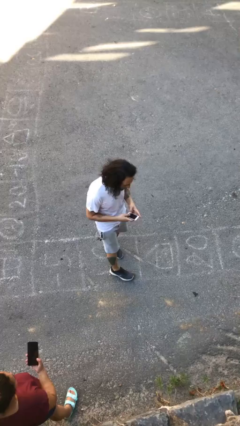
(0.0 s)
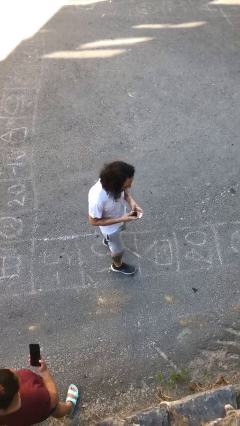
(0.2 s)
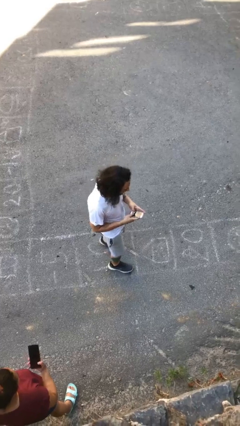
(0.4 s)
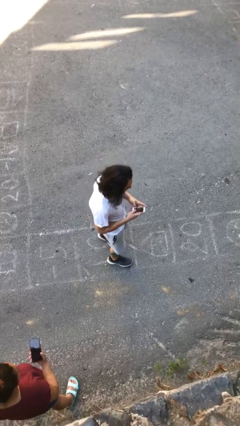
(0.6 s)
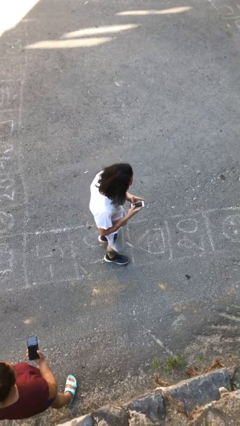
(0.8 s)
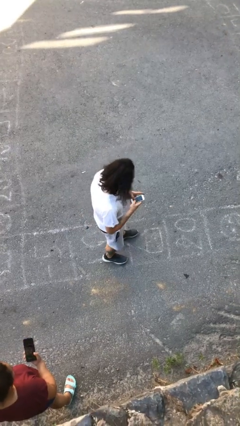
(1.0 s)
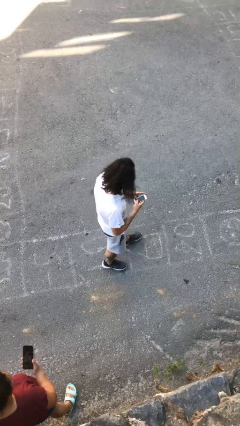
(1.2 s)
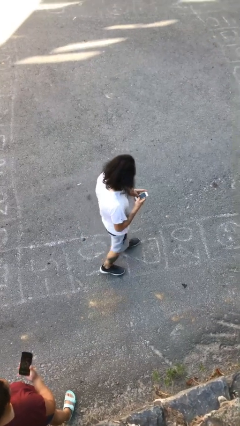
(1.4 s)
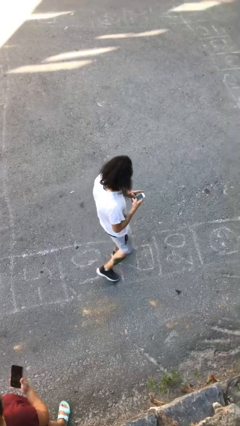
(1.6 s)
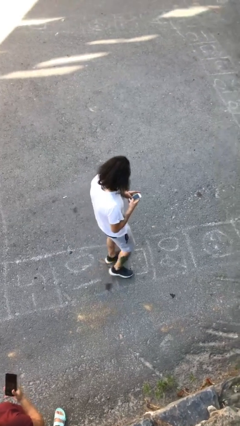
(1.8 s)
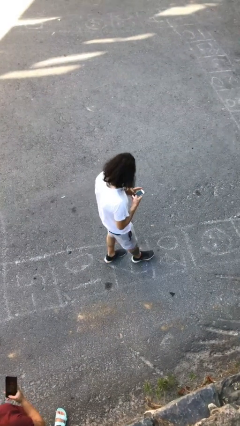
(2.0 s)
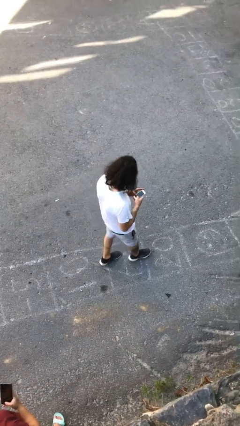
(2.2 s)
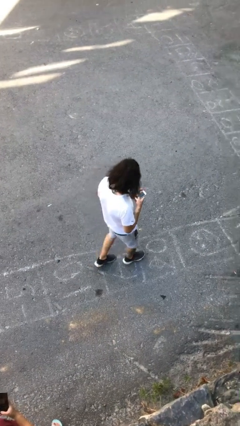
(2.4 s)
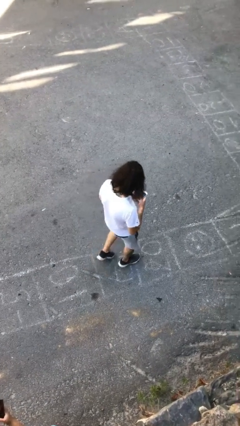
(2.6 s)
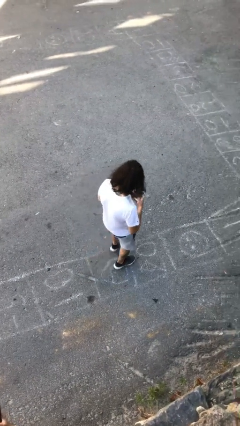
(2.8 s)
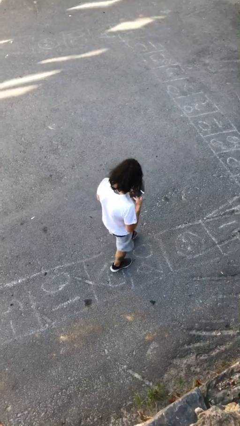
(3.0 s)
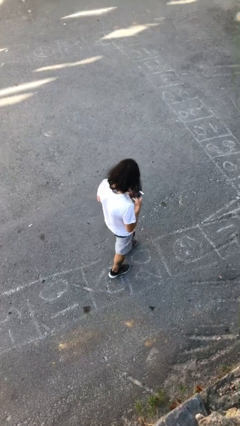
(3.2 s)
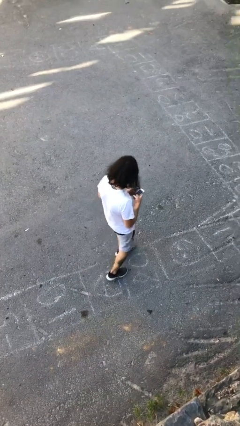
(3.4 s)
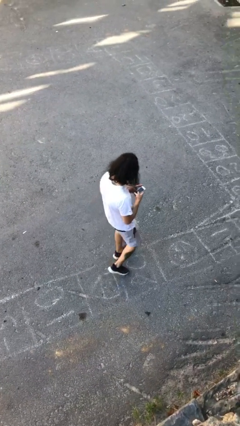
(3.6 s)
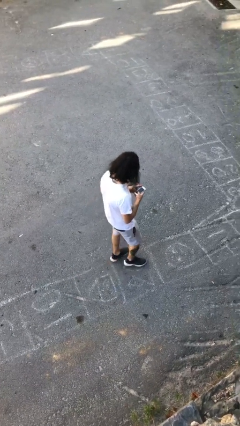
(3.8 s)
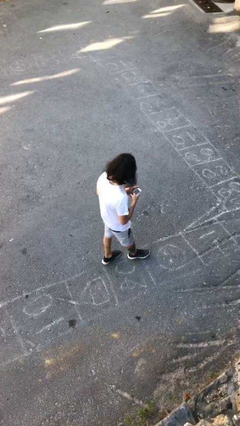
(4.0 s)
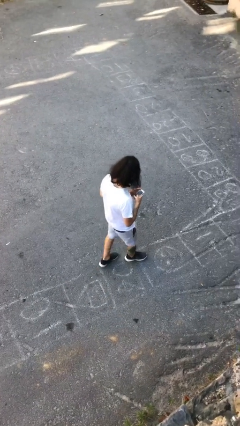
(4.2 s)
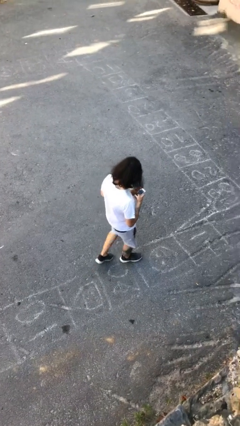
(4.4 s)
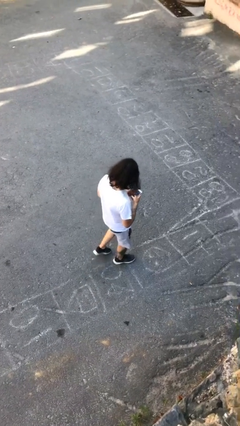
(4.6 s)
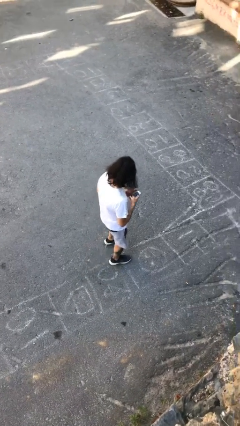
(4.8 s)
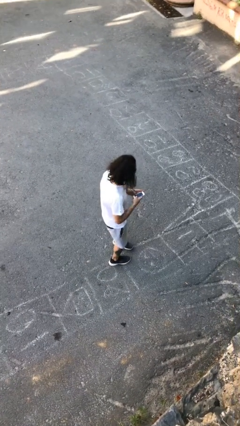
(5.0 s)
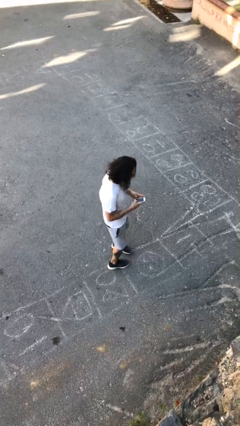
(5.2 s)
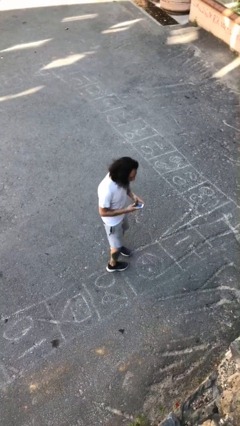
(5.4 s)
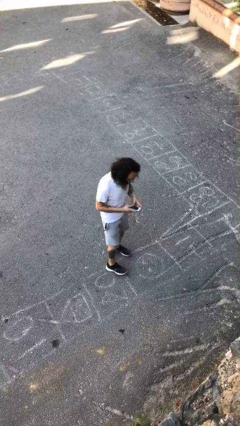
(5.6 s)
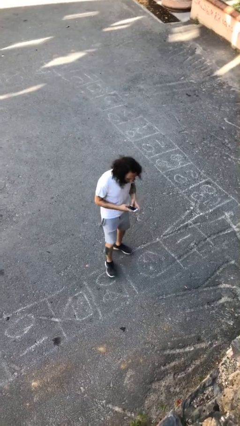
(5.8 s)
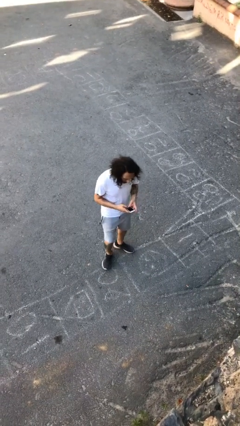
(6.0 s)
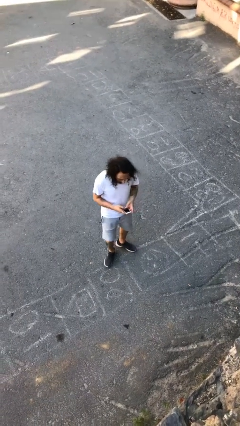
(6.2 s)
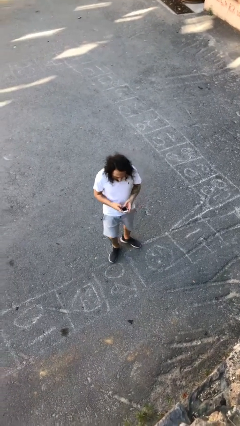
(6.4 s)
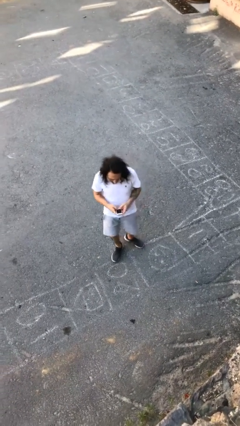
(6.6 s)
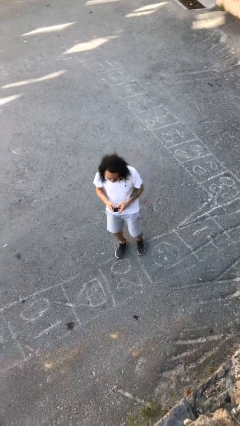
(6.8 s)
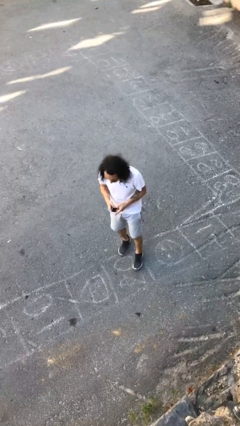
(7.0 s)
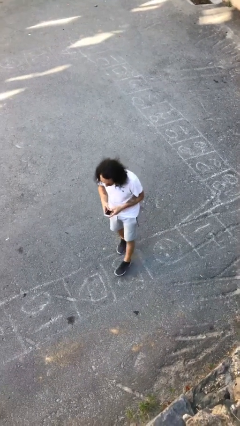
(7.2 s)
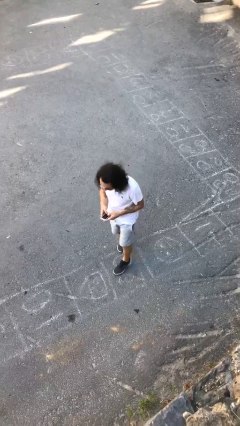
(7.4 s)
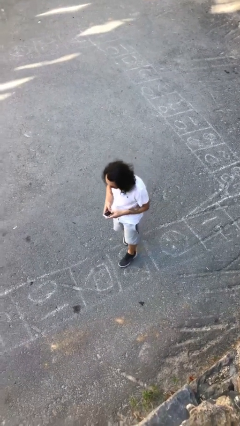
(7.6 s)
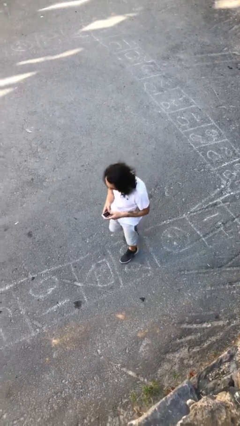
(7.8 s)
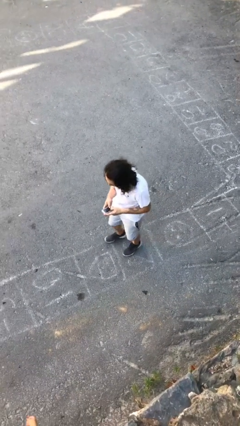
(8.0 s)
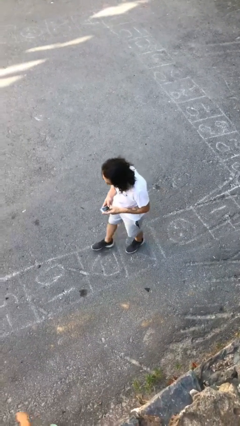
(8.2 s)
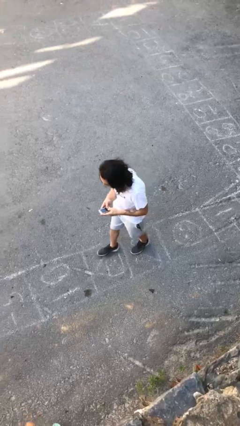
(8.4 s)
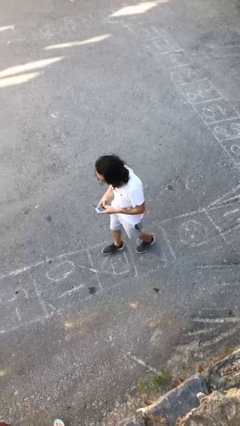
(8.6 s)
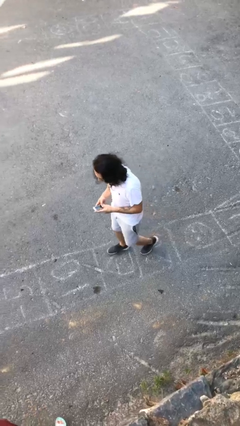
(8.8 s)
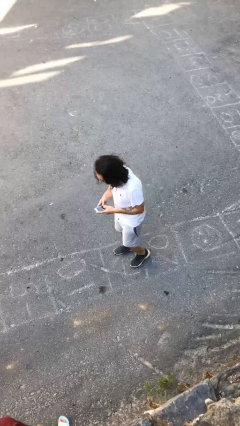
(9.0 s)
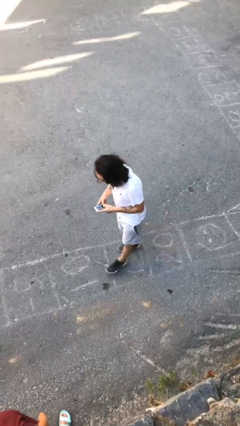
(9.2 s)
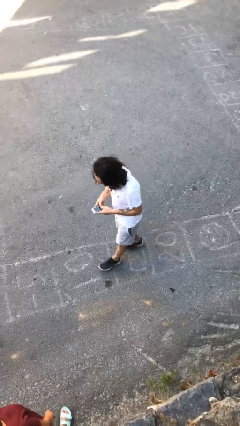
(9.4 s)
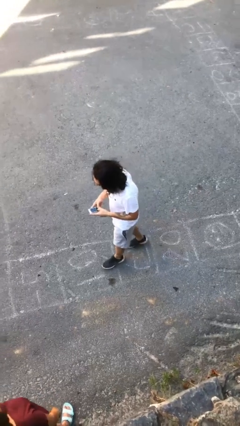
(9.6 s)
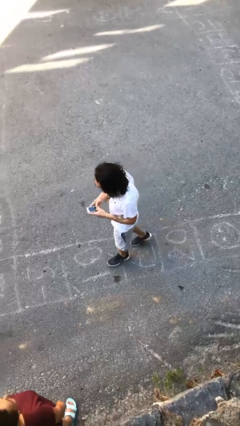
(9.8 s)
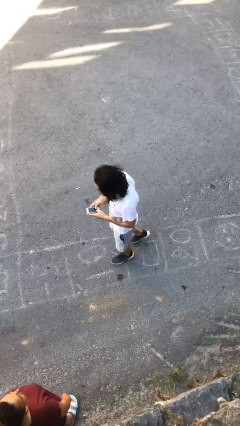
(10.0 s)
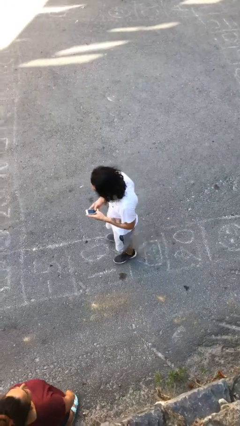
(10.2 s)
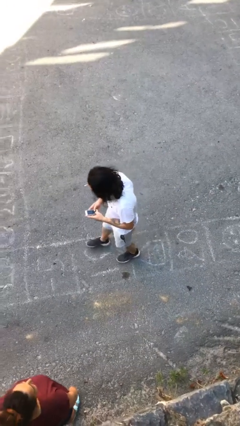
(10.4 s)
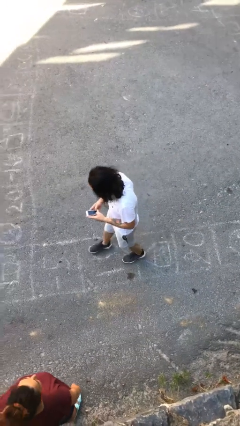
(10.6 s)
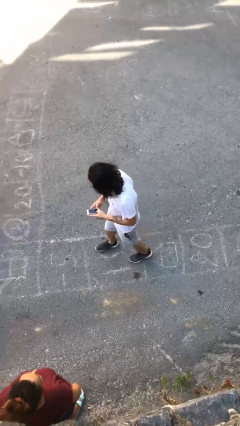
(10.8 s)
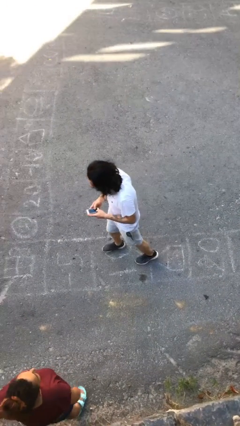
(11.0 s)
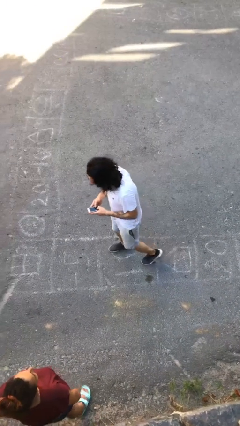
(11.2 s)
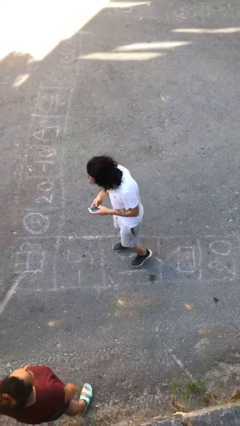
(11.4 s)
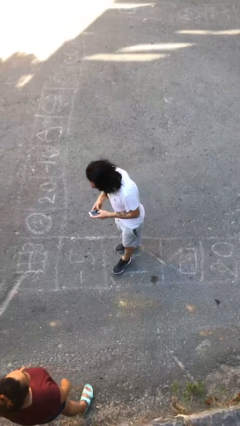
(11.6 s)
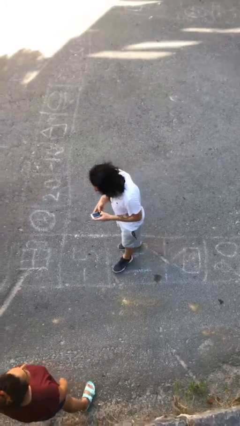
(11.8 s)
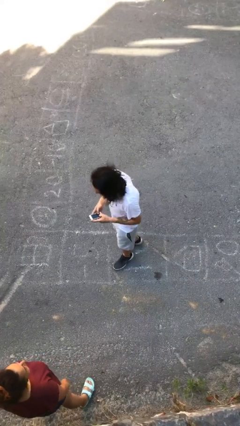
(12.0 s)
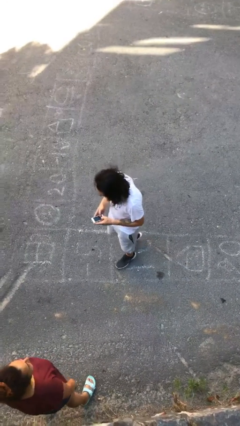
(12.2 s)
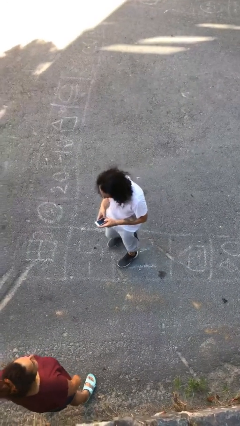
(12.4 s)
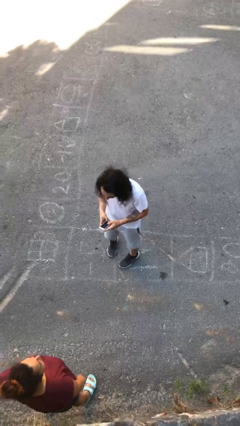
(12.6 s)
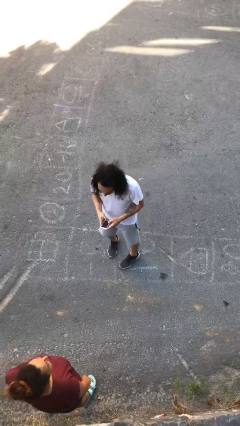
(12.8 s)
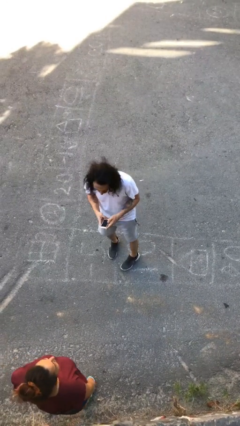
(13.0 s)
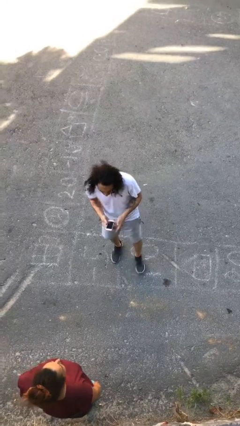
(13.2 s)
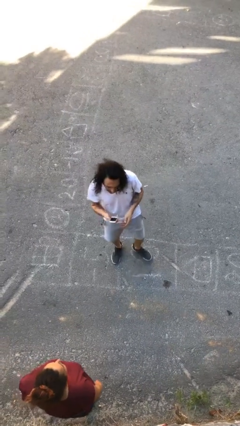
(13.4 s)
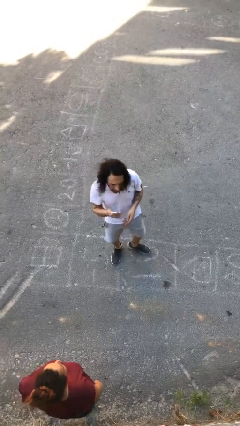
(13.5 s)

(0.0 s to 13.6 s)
person texts on phone

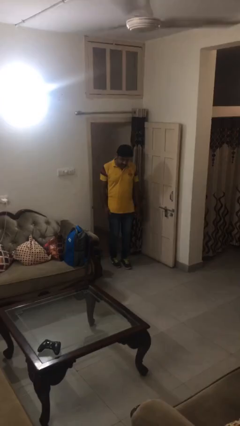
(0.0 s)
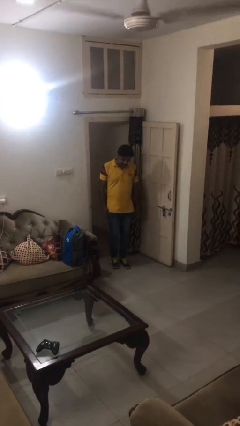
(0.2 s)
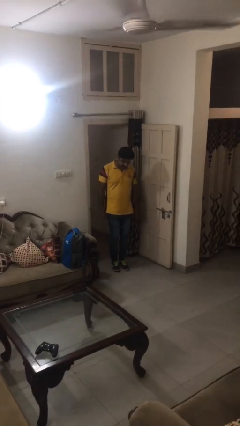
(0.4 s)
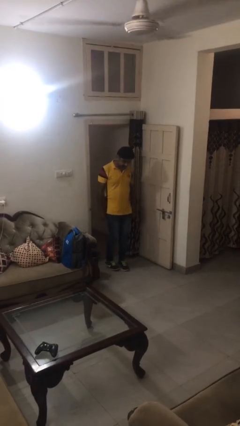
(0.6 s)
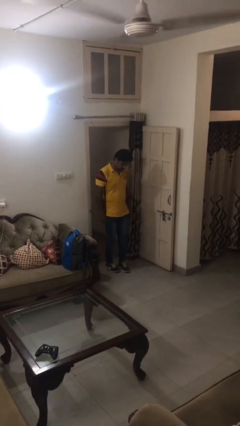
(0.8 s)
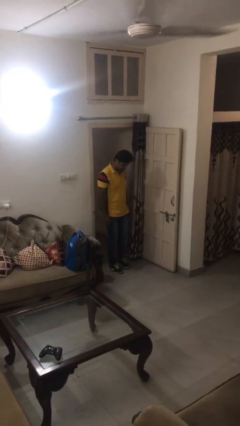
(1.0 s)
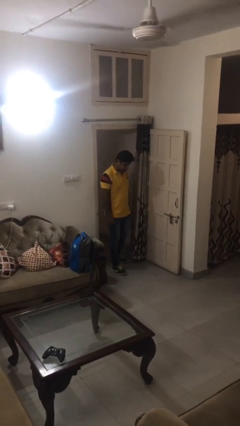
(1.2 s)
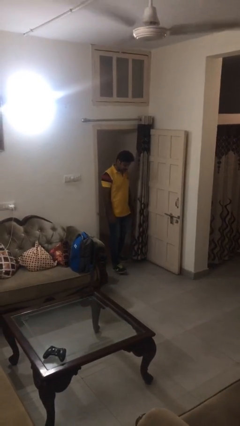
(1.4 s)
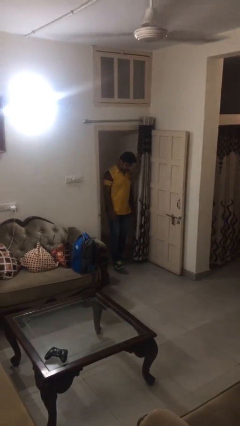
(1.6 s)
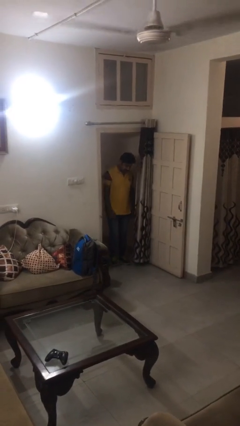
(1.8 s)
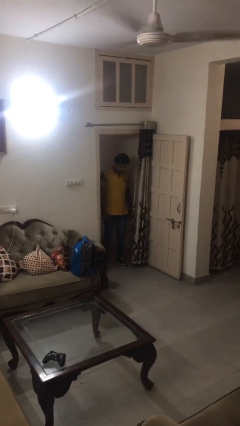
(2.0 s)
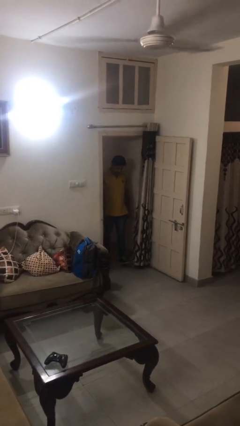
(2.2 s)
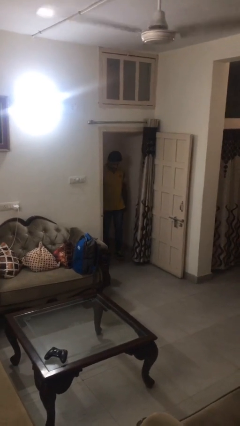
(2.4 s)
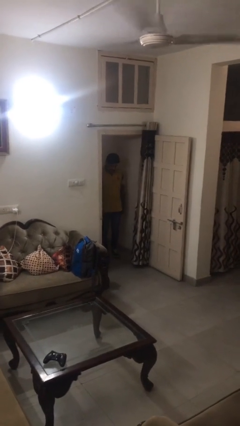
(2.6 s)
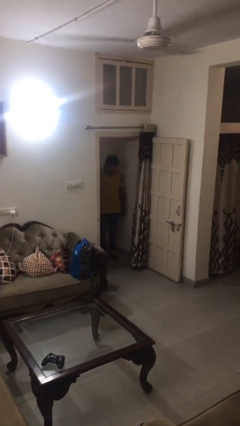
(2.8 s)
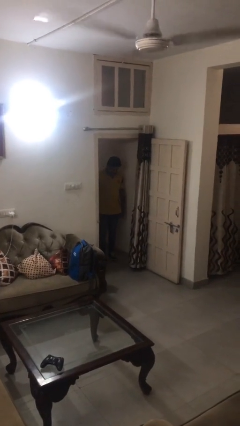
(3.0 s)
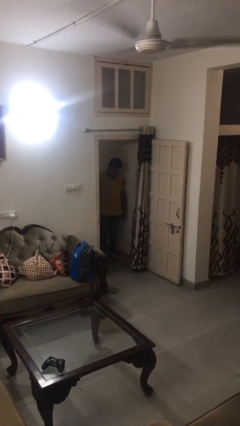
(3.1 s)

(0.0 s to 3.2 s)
person bumps into wall

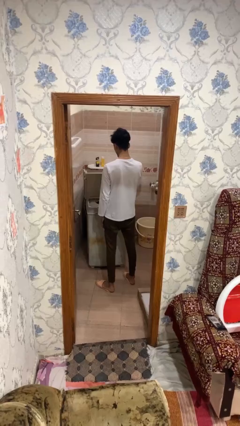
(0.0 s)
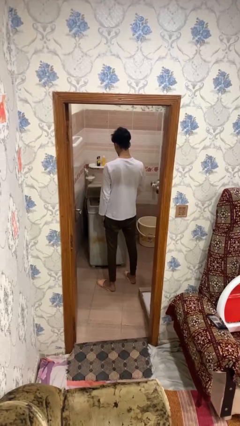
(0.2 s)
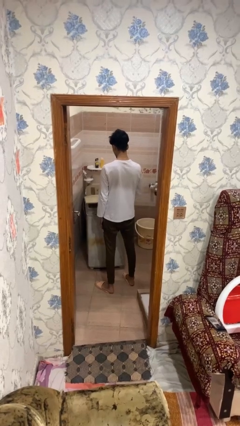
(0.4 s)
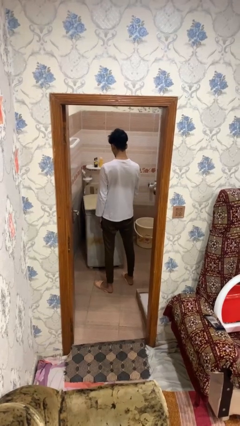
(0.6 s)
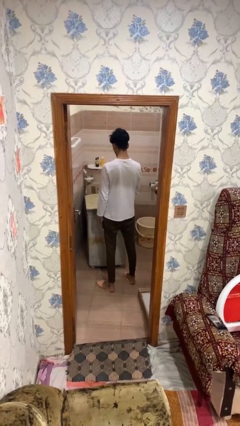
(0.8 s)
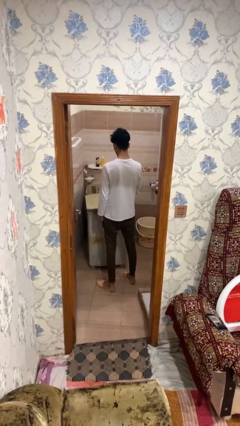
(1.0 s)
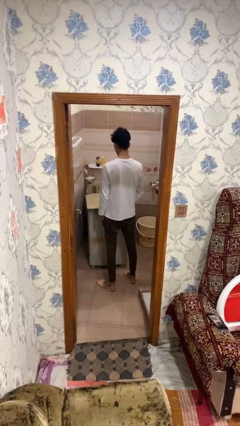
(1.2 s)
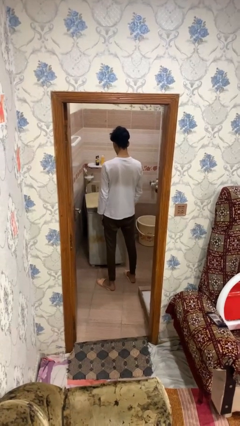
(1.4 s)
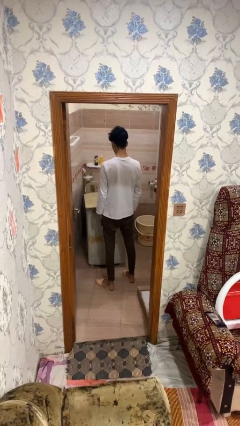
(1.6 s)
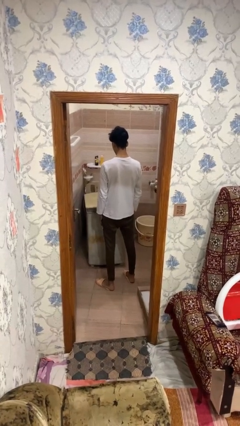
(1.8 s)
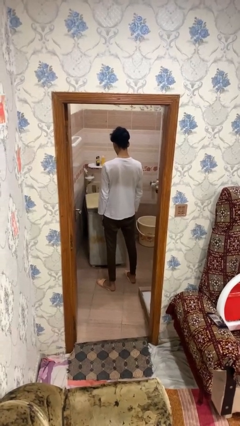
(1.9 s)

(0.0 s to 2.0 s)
person closes clothes washer
